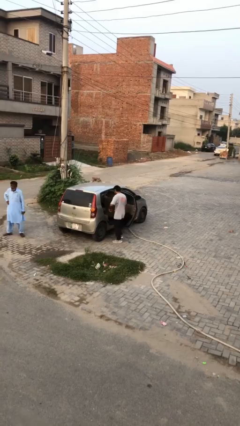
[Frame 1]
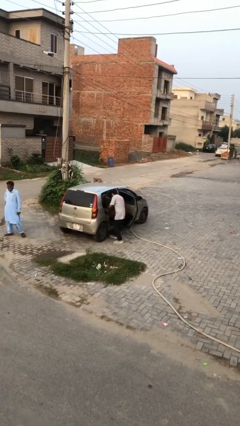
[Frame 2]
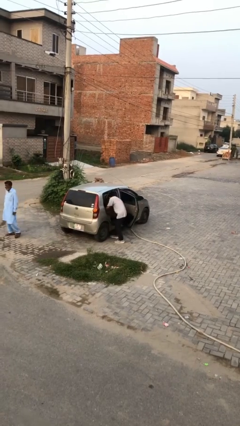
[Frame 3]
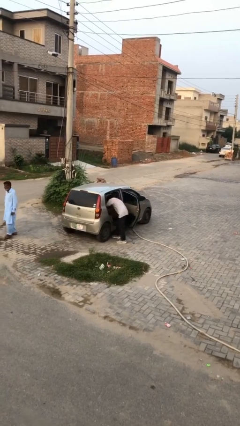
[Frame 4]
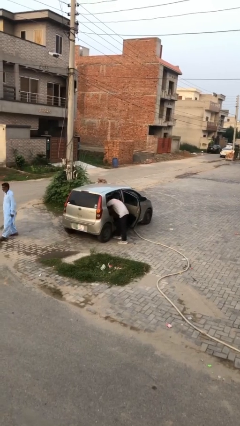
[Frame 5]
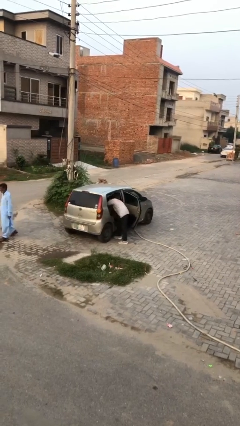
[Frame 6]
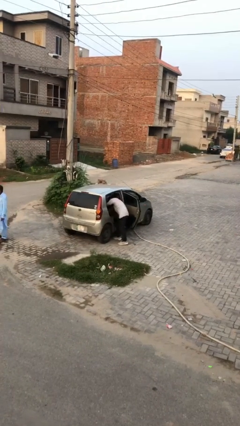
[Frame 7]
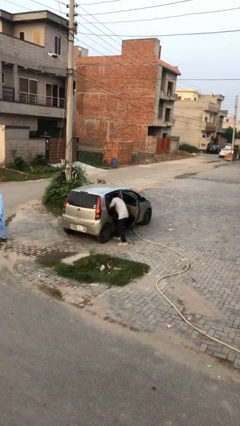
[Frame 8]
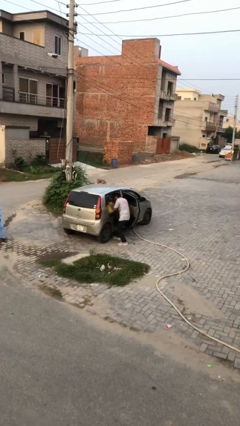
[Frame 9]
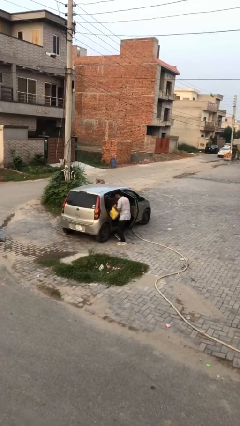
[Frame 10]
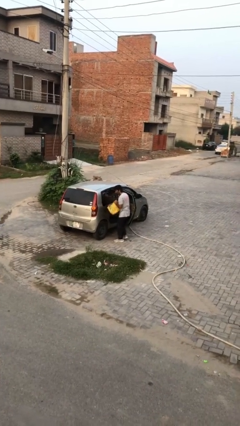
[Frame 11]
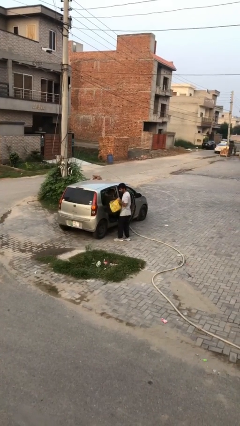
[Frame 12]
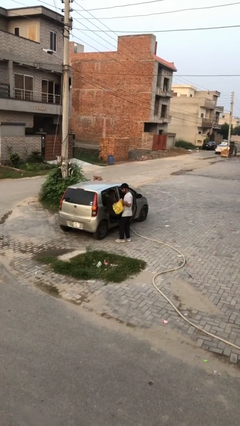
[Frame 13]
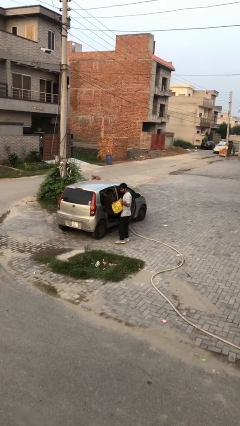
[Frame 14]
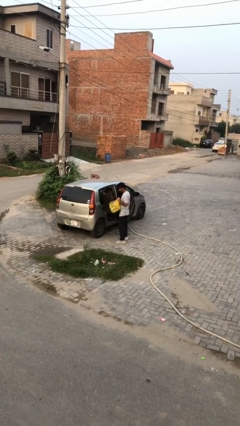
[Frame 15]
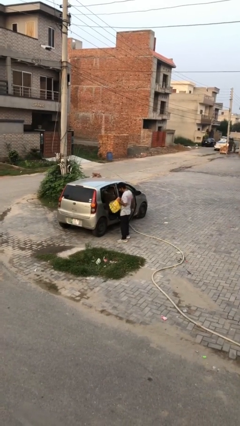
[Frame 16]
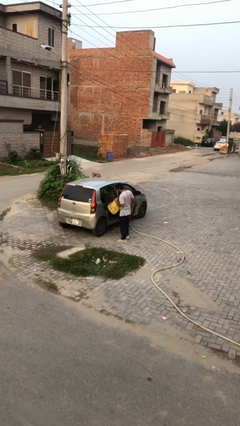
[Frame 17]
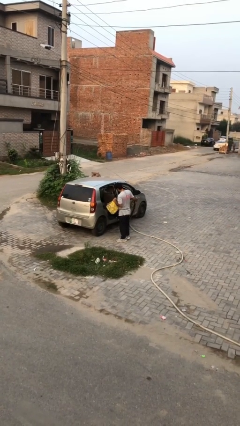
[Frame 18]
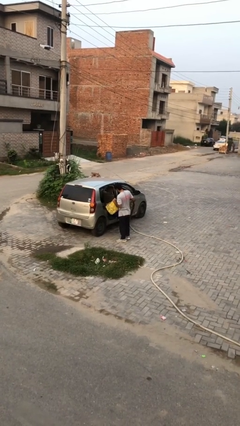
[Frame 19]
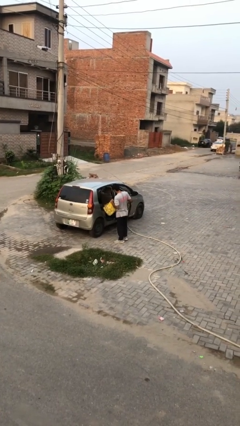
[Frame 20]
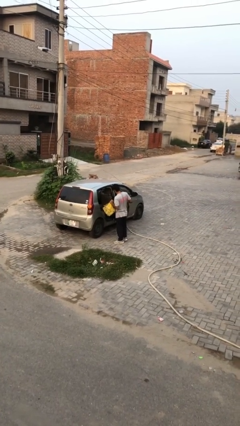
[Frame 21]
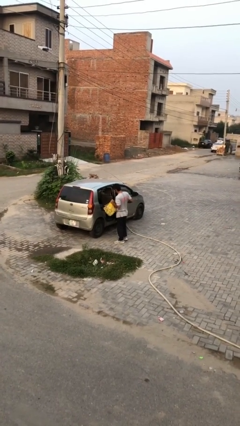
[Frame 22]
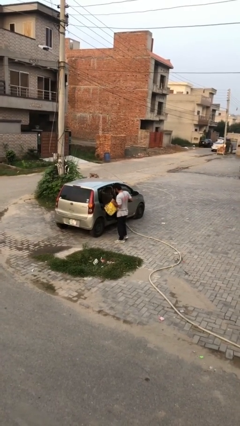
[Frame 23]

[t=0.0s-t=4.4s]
person unloads car

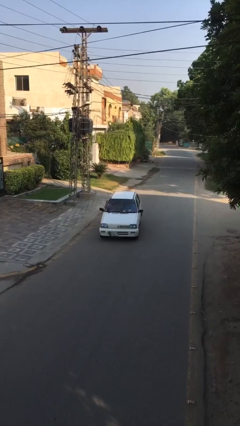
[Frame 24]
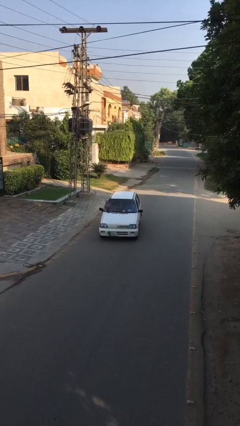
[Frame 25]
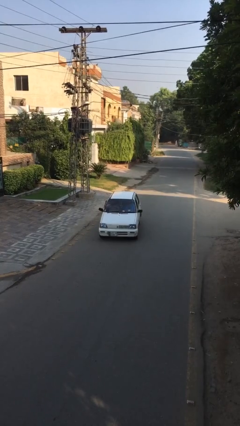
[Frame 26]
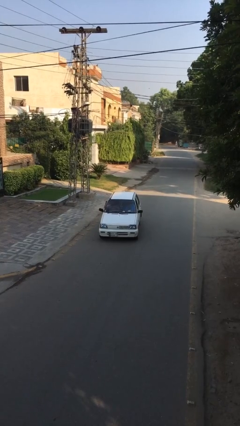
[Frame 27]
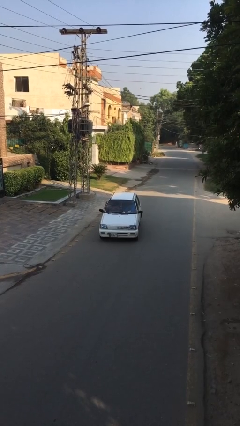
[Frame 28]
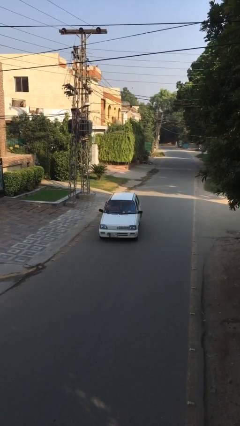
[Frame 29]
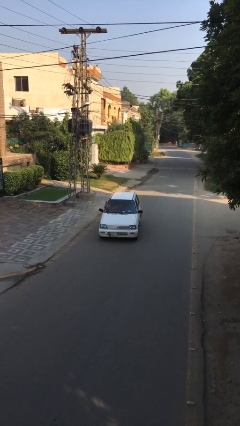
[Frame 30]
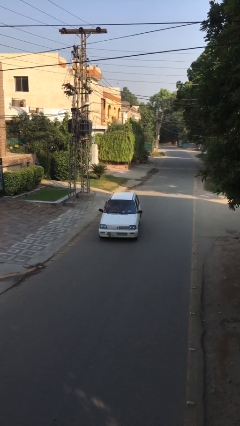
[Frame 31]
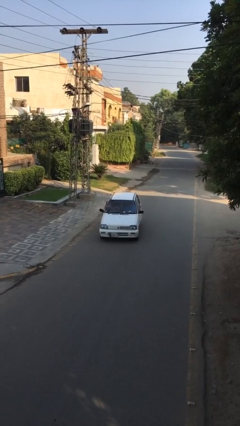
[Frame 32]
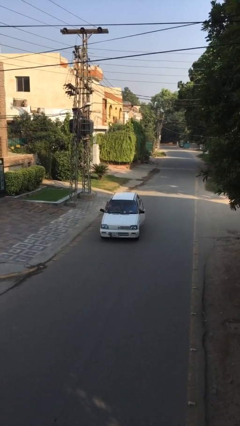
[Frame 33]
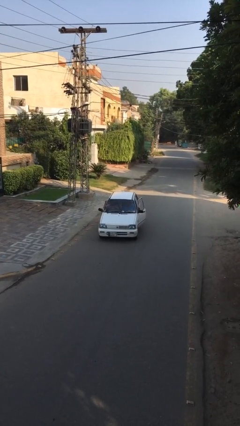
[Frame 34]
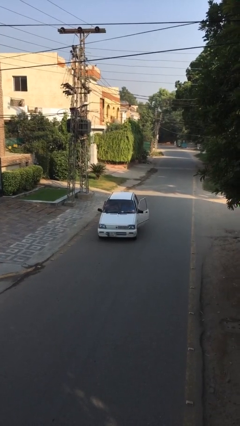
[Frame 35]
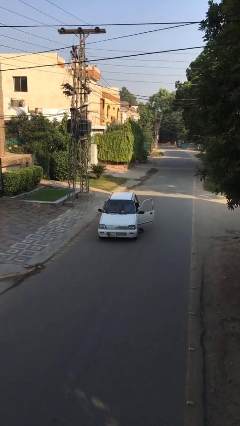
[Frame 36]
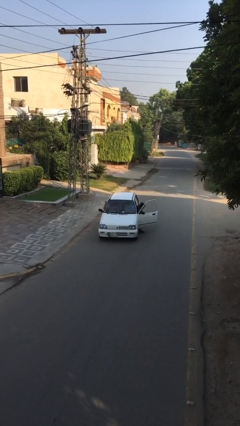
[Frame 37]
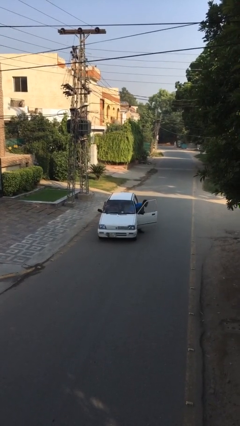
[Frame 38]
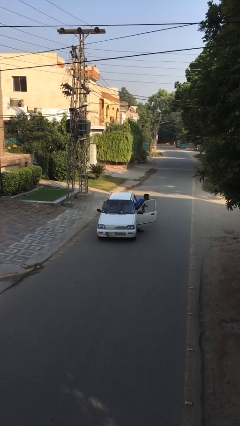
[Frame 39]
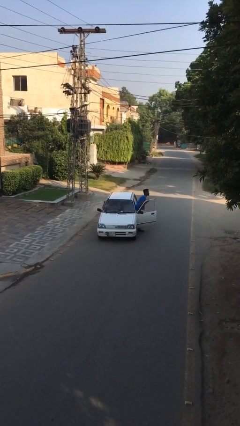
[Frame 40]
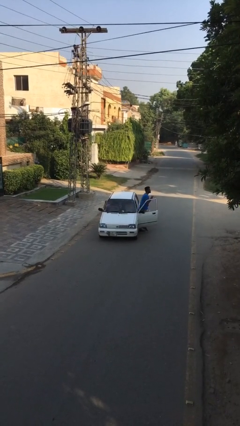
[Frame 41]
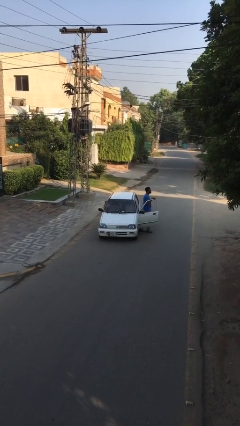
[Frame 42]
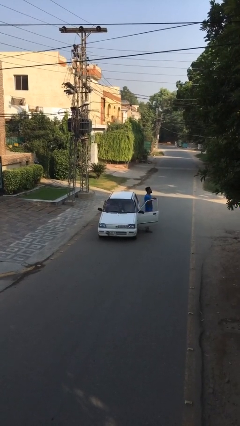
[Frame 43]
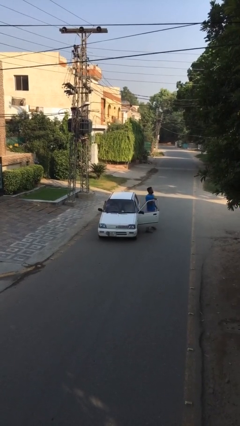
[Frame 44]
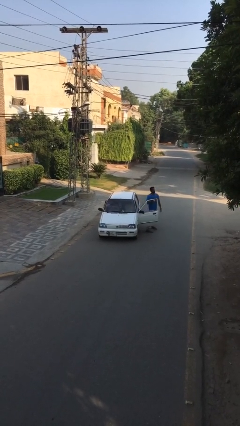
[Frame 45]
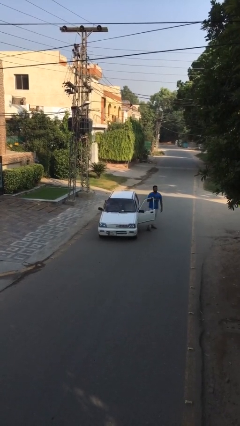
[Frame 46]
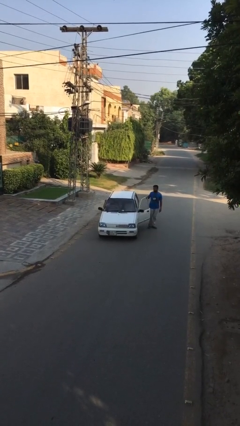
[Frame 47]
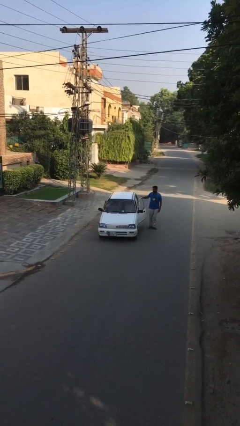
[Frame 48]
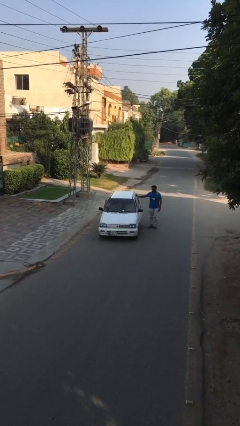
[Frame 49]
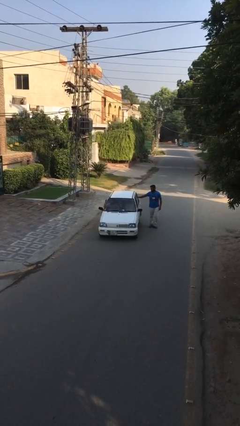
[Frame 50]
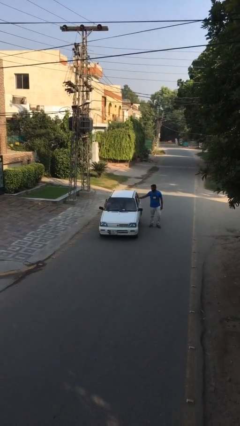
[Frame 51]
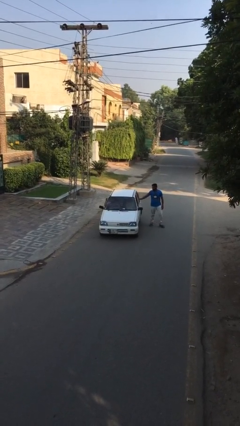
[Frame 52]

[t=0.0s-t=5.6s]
car drops off person

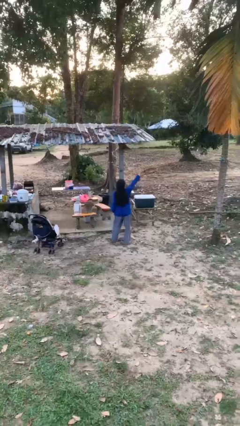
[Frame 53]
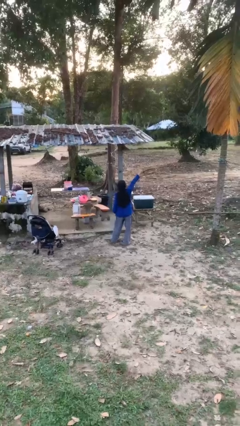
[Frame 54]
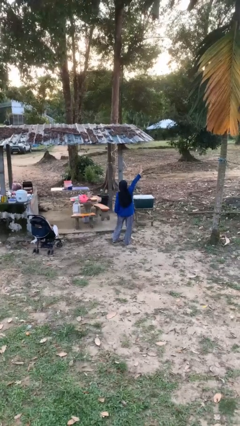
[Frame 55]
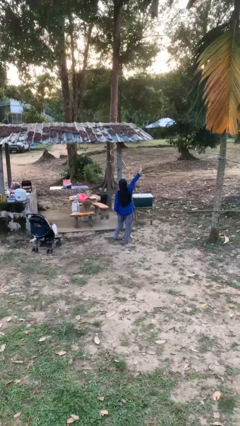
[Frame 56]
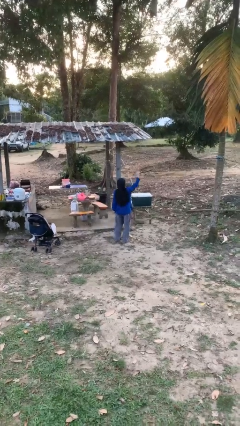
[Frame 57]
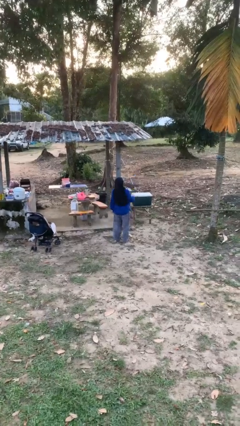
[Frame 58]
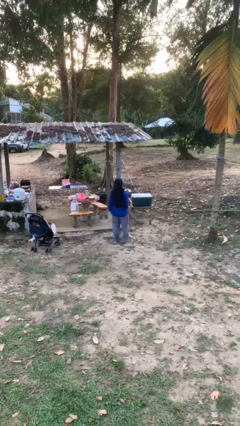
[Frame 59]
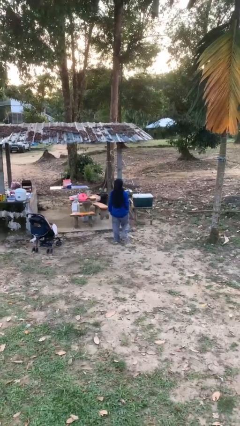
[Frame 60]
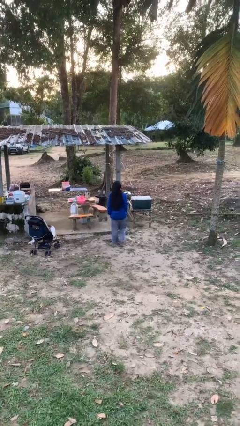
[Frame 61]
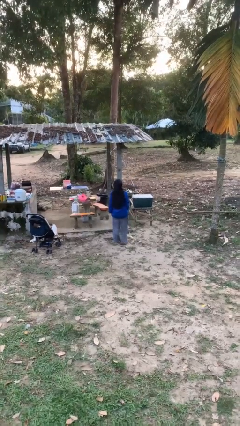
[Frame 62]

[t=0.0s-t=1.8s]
person gestures number three

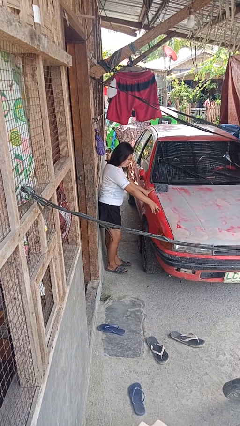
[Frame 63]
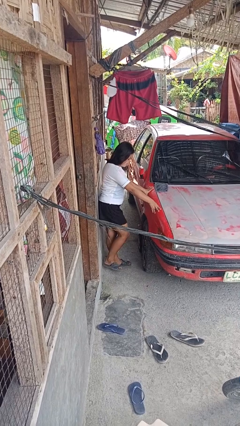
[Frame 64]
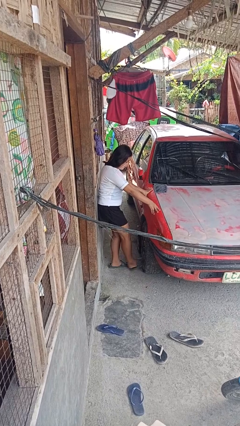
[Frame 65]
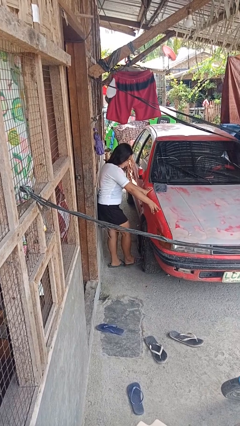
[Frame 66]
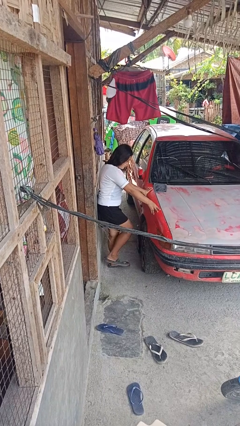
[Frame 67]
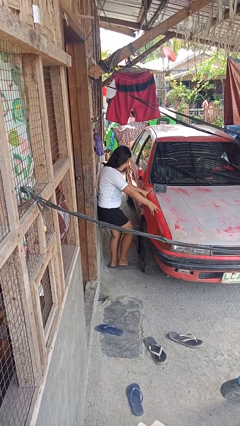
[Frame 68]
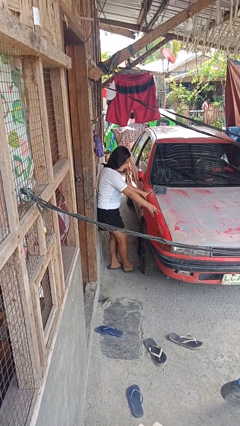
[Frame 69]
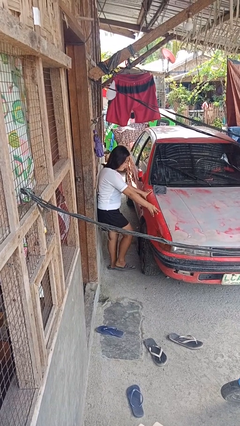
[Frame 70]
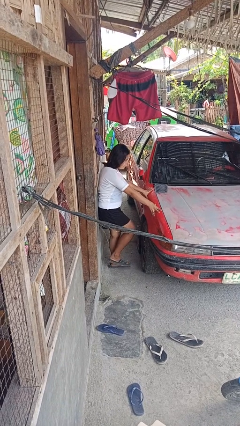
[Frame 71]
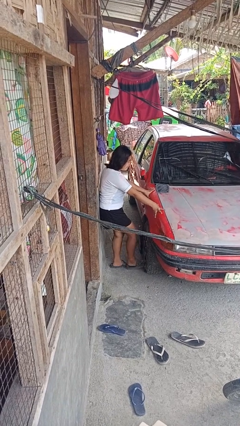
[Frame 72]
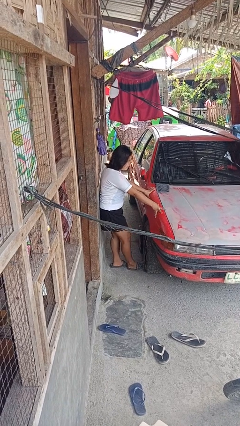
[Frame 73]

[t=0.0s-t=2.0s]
person kicks car tires

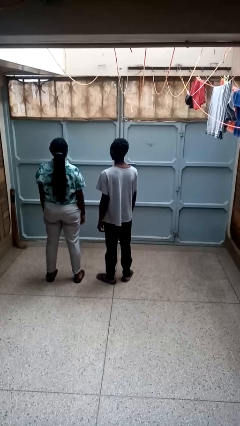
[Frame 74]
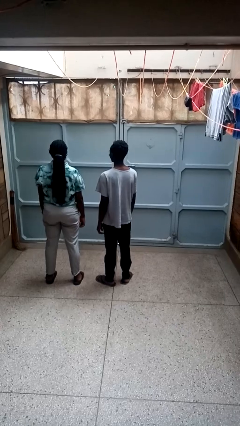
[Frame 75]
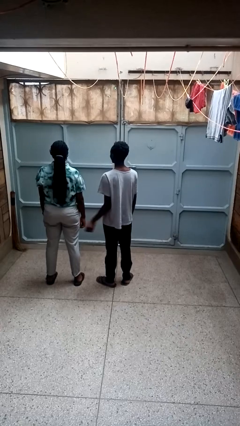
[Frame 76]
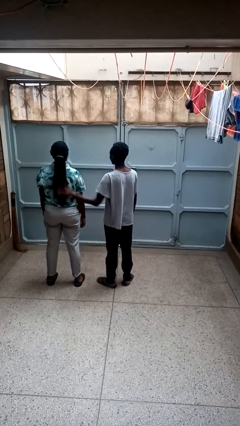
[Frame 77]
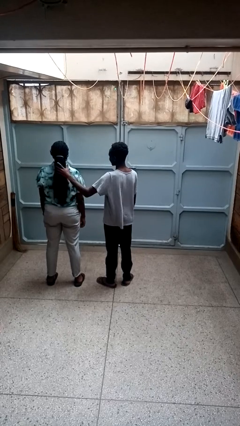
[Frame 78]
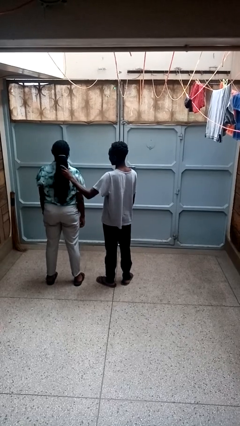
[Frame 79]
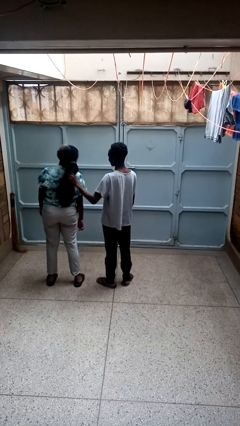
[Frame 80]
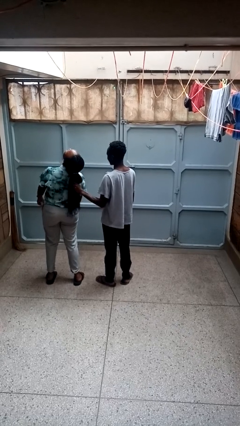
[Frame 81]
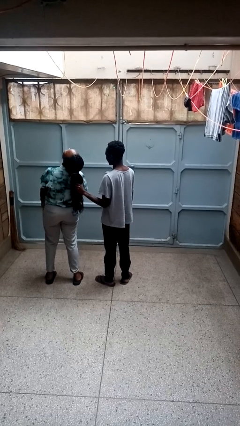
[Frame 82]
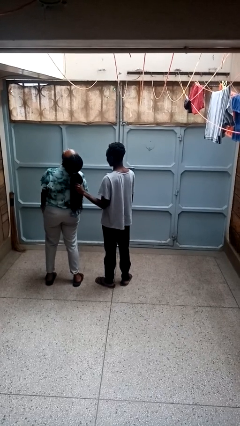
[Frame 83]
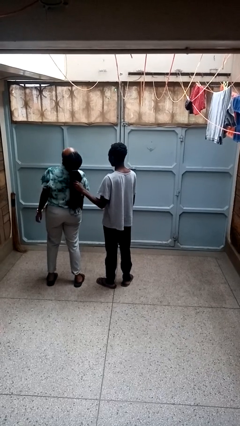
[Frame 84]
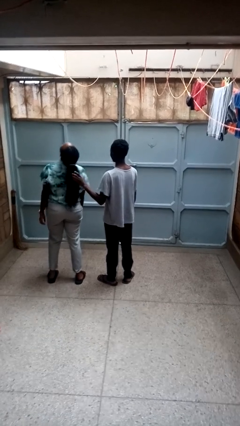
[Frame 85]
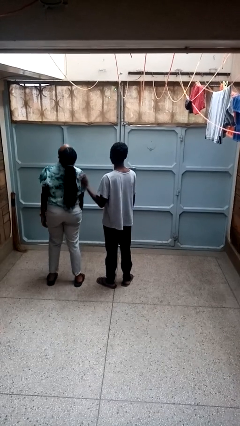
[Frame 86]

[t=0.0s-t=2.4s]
person grabs person by hair

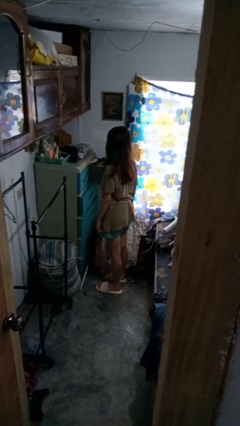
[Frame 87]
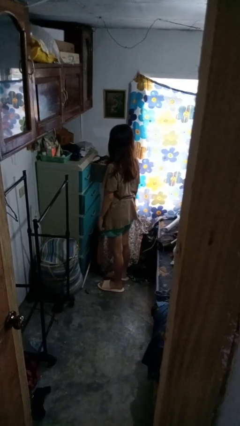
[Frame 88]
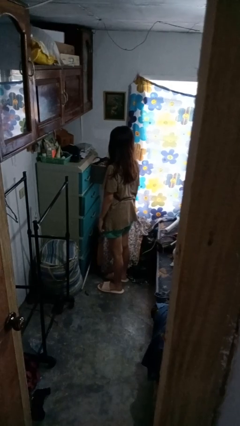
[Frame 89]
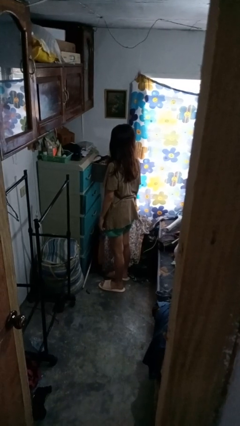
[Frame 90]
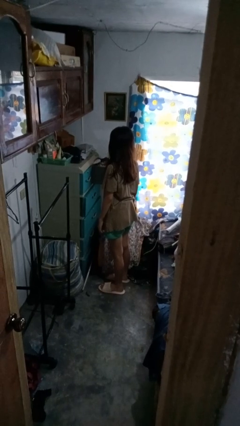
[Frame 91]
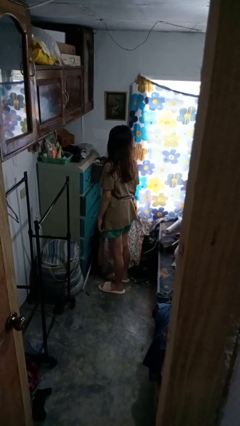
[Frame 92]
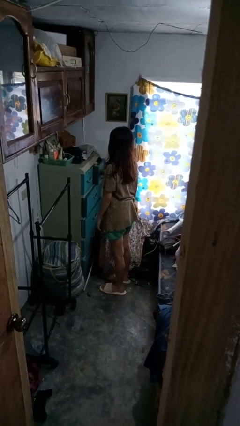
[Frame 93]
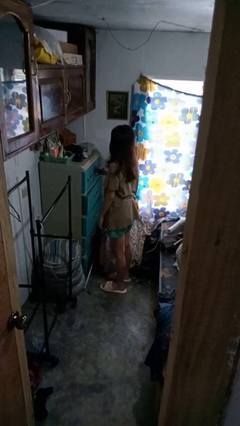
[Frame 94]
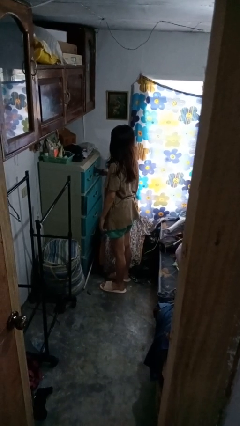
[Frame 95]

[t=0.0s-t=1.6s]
person closes dresser drawer
